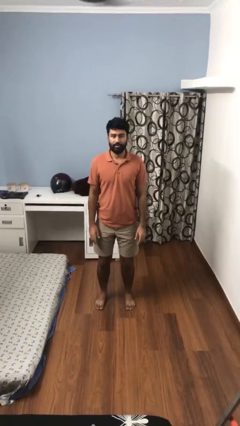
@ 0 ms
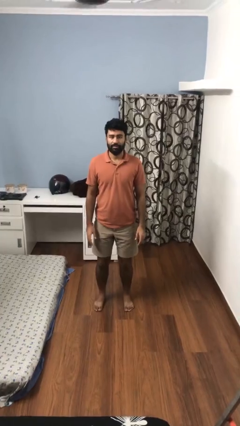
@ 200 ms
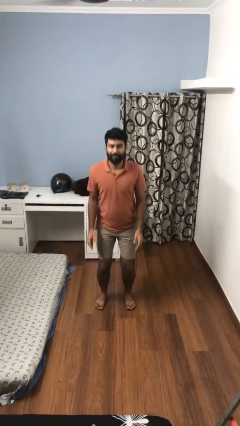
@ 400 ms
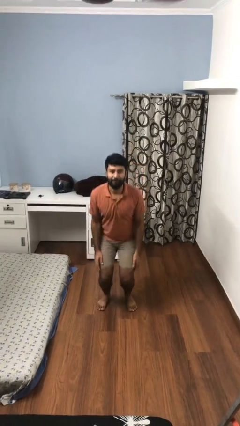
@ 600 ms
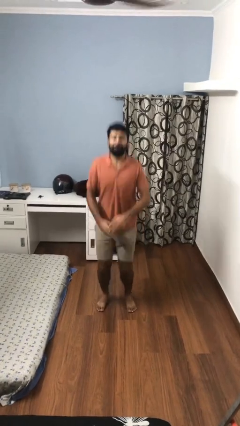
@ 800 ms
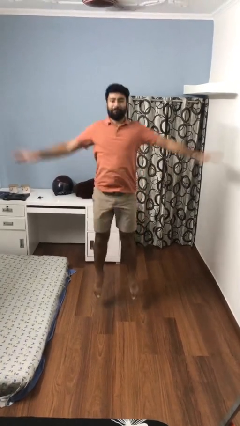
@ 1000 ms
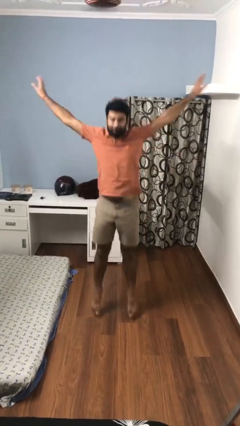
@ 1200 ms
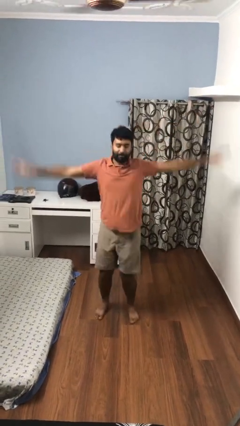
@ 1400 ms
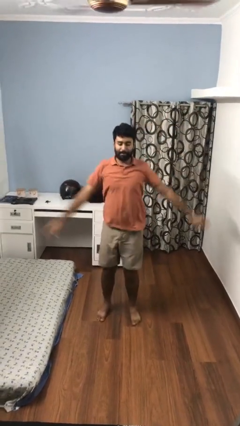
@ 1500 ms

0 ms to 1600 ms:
person exercises with jumping jacks

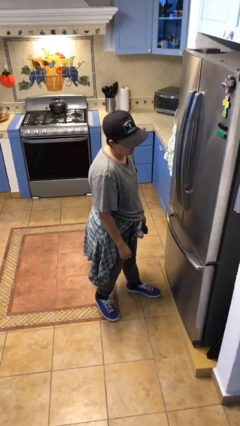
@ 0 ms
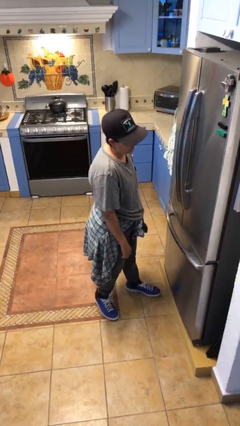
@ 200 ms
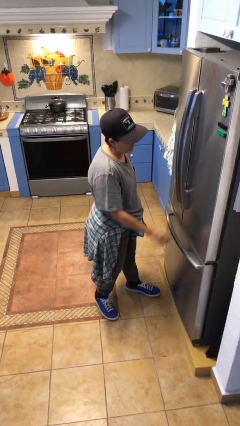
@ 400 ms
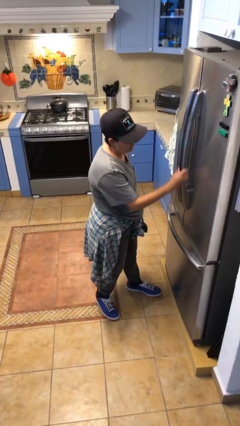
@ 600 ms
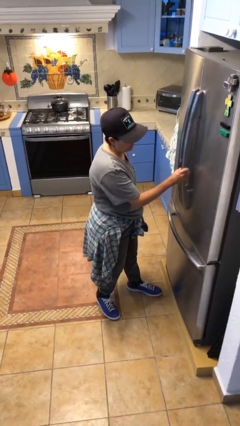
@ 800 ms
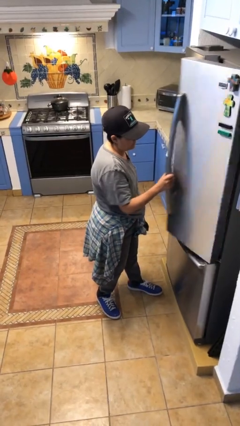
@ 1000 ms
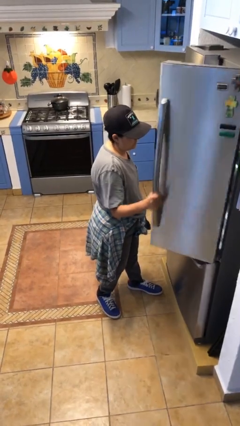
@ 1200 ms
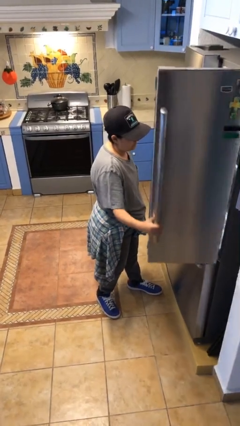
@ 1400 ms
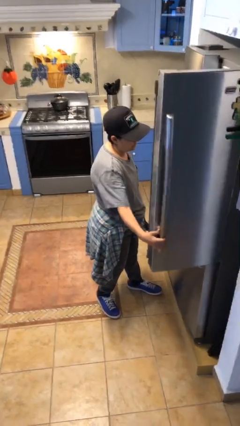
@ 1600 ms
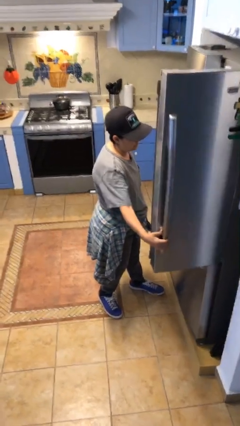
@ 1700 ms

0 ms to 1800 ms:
person opens refrigerator

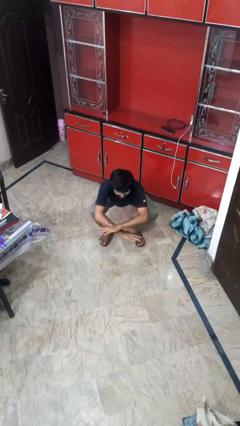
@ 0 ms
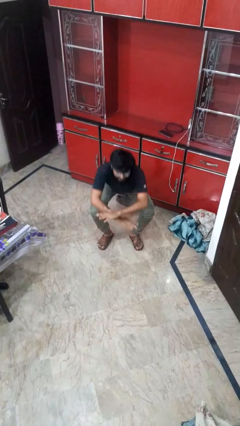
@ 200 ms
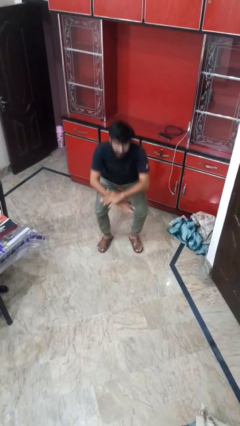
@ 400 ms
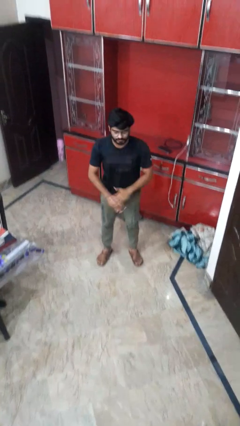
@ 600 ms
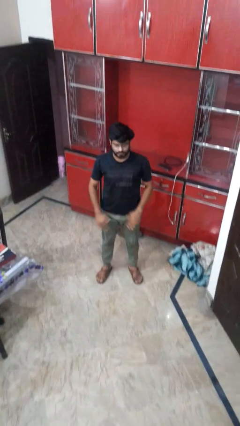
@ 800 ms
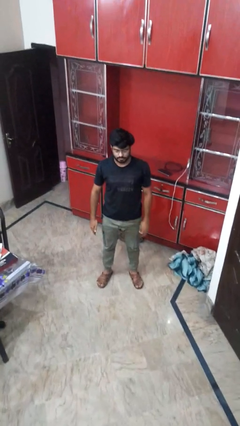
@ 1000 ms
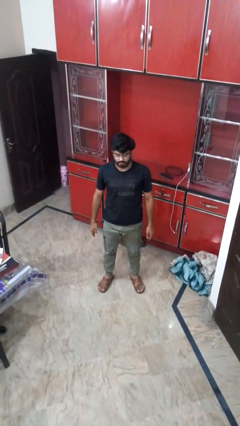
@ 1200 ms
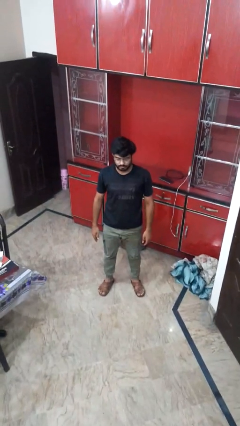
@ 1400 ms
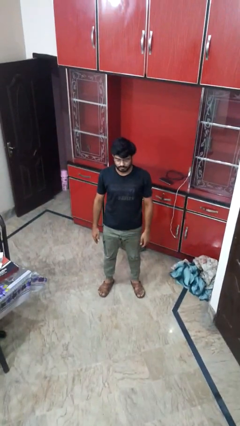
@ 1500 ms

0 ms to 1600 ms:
person stands up

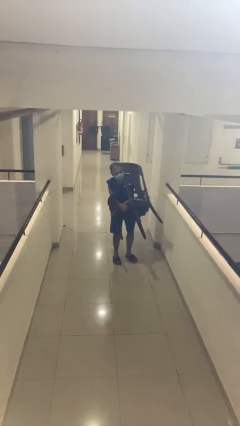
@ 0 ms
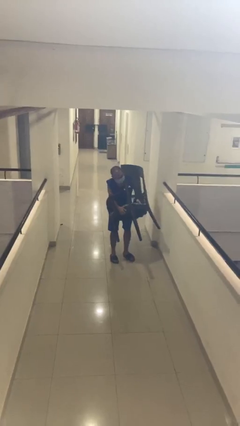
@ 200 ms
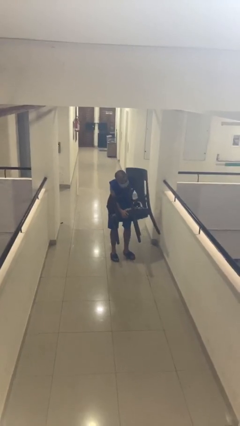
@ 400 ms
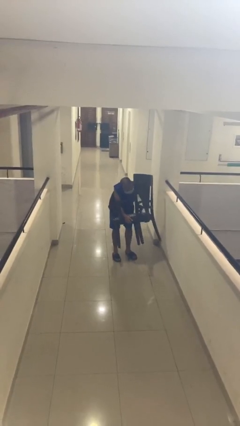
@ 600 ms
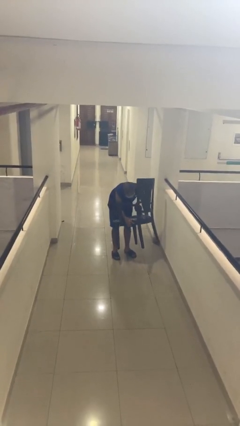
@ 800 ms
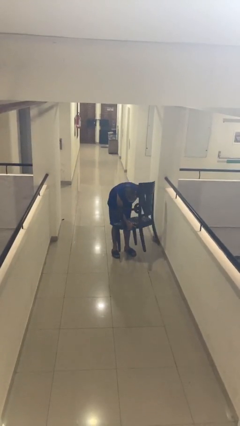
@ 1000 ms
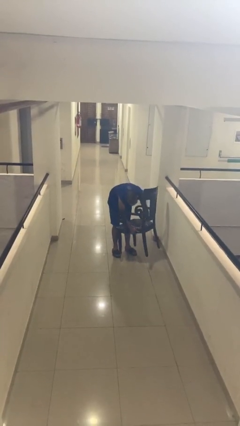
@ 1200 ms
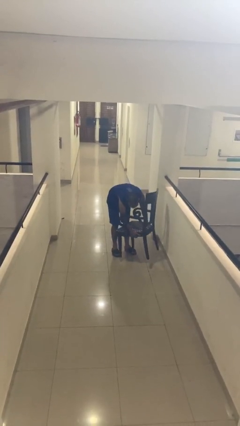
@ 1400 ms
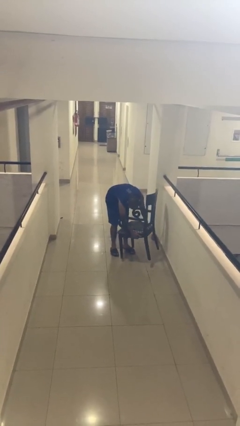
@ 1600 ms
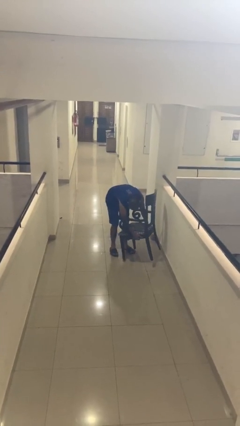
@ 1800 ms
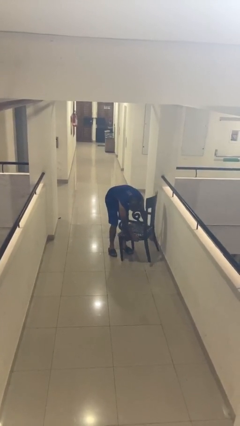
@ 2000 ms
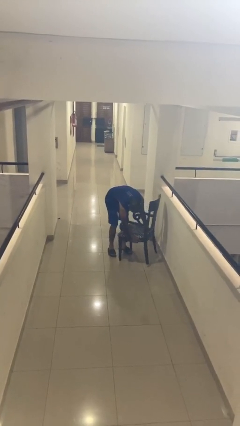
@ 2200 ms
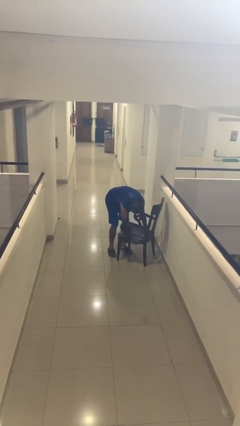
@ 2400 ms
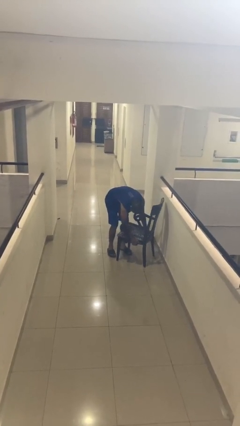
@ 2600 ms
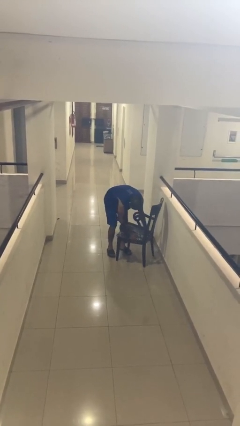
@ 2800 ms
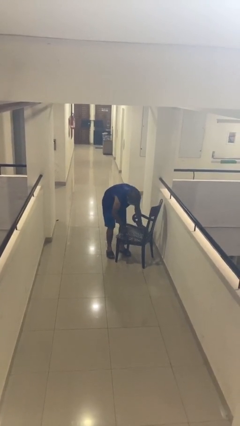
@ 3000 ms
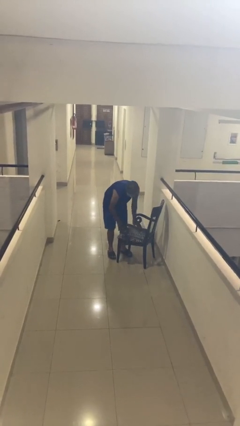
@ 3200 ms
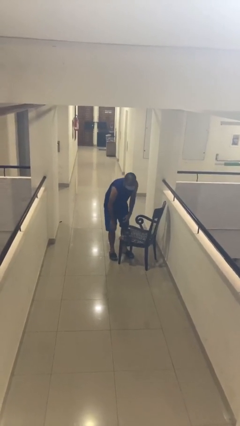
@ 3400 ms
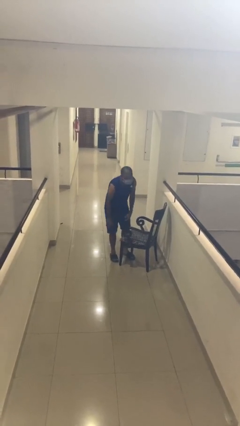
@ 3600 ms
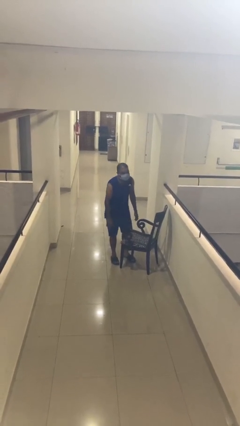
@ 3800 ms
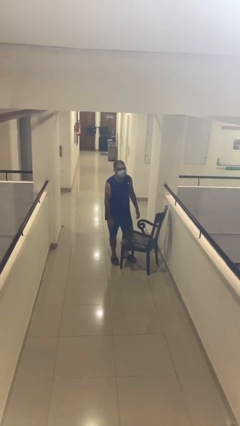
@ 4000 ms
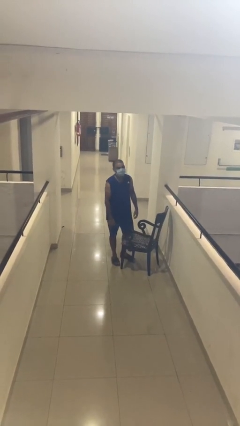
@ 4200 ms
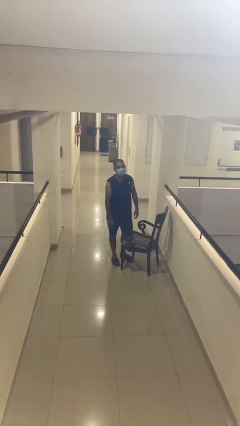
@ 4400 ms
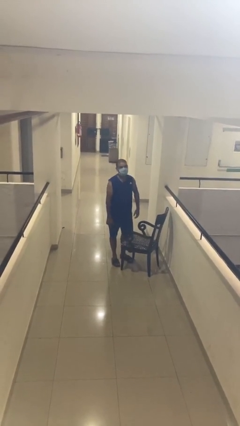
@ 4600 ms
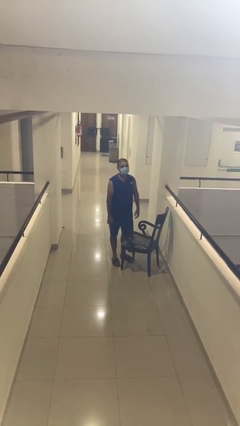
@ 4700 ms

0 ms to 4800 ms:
person puts down object on floor

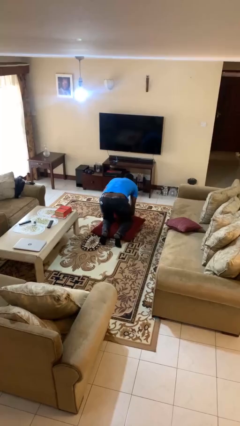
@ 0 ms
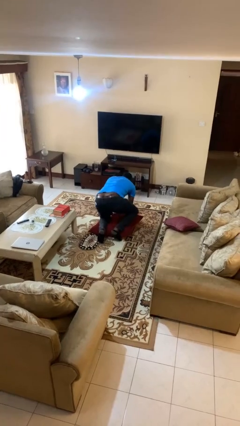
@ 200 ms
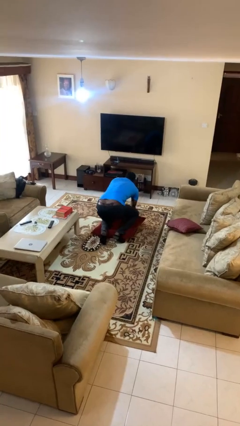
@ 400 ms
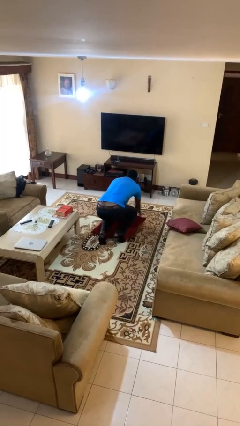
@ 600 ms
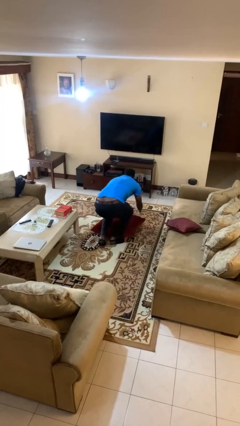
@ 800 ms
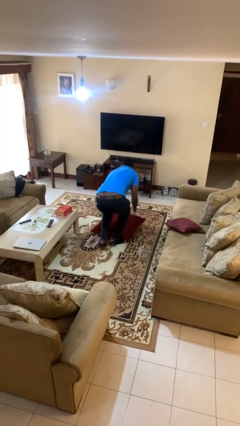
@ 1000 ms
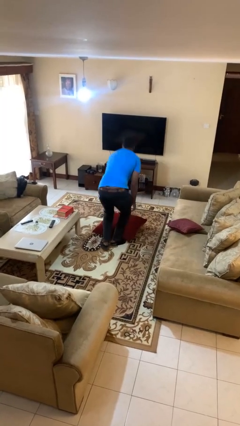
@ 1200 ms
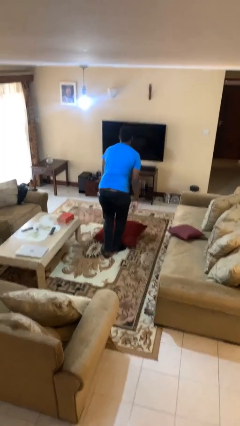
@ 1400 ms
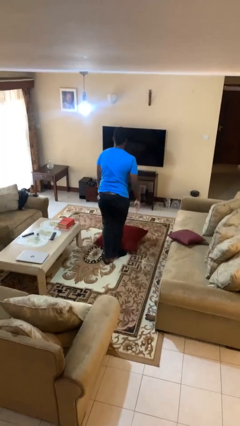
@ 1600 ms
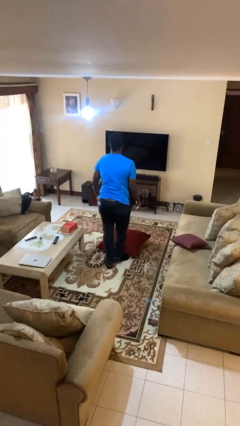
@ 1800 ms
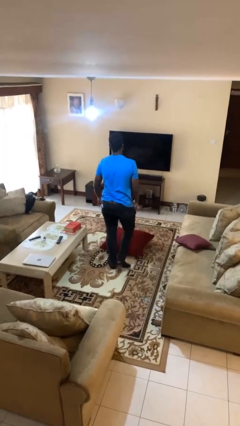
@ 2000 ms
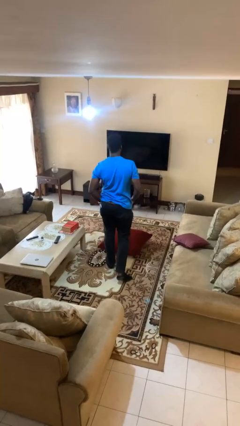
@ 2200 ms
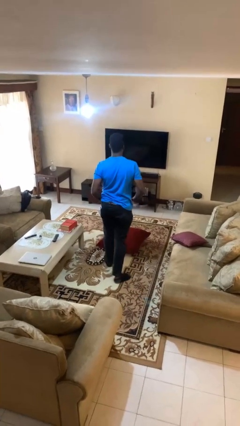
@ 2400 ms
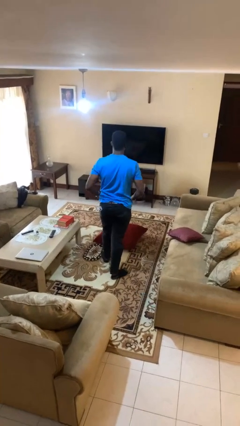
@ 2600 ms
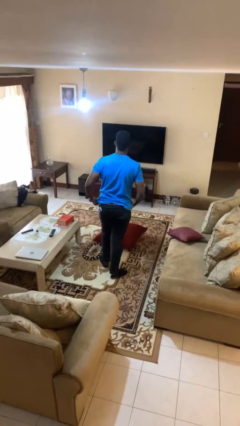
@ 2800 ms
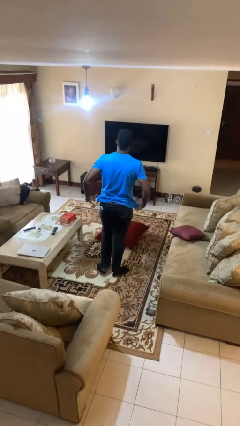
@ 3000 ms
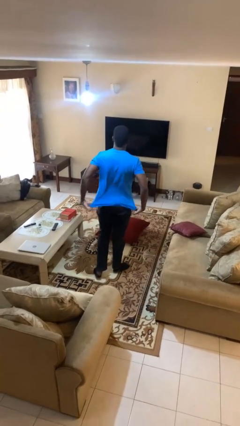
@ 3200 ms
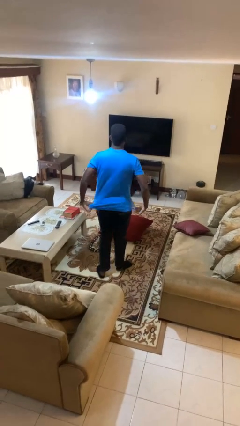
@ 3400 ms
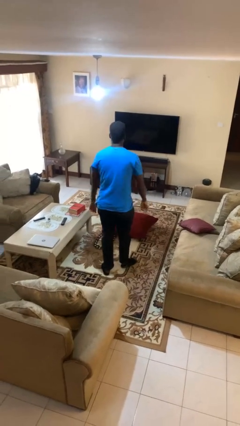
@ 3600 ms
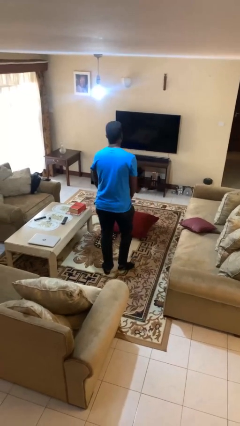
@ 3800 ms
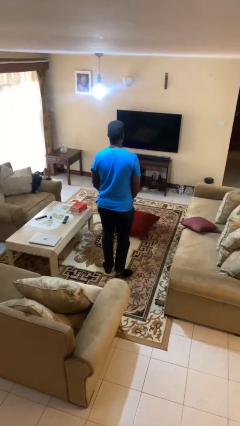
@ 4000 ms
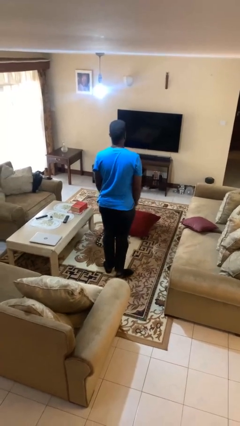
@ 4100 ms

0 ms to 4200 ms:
person stands up from floor

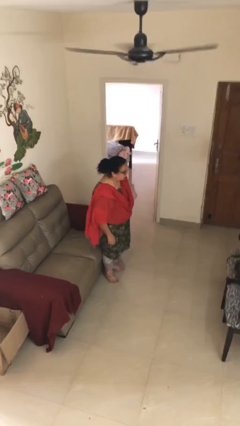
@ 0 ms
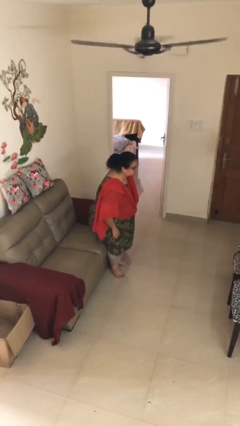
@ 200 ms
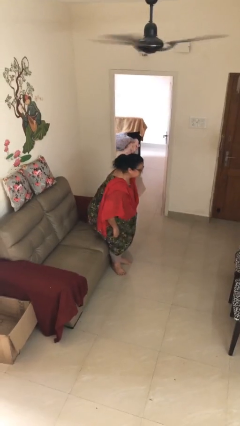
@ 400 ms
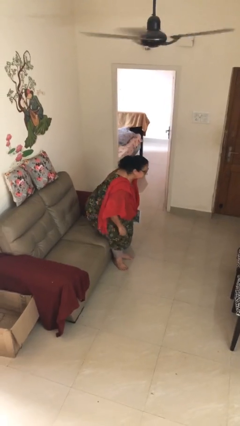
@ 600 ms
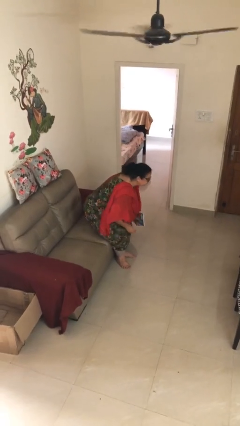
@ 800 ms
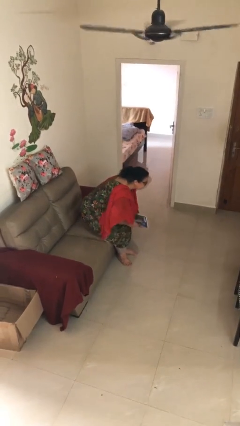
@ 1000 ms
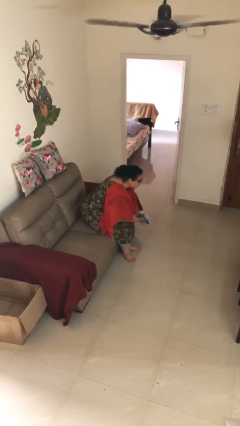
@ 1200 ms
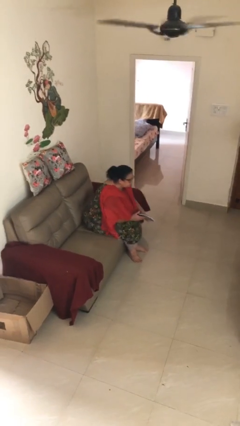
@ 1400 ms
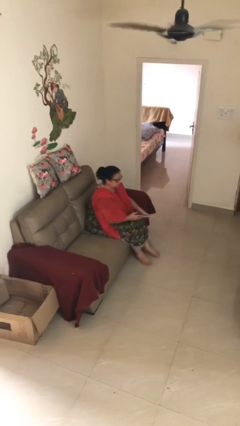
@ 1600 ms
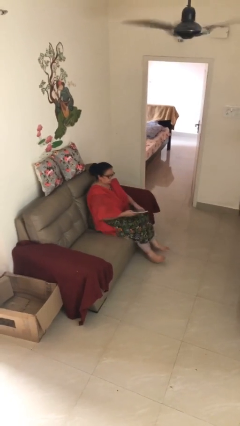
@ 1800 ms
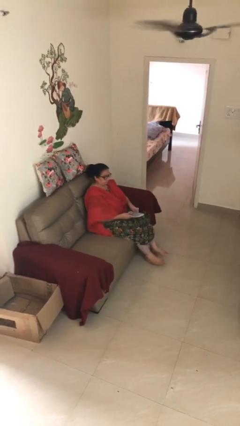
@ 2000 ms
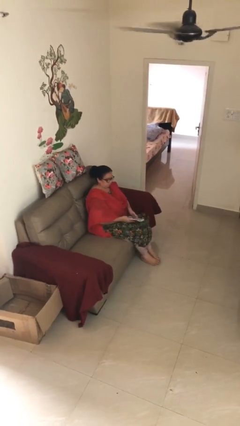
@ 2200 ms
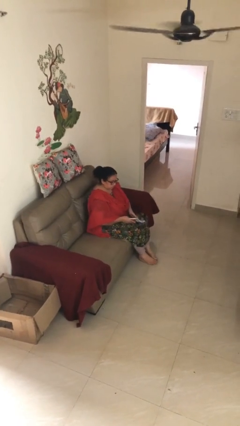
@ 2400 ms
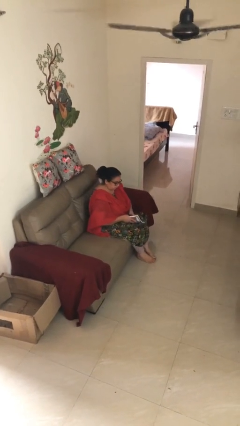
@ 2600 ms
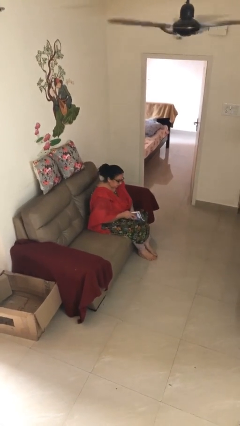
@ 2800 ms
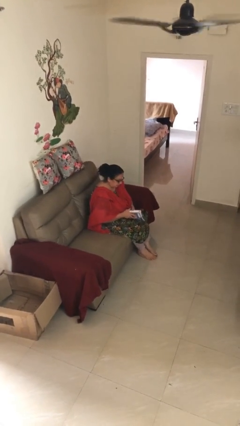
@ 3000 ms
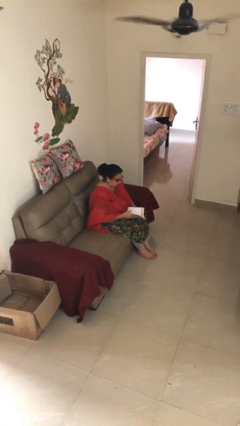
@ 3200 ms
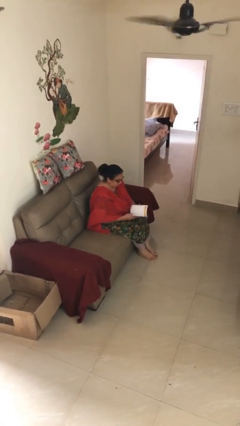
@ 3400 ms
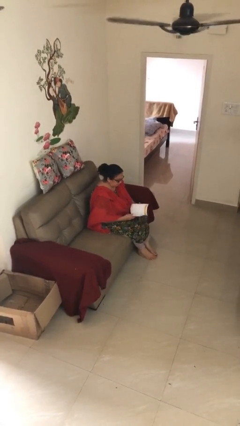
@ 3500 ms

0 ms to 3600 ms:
person sits down
